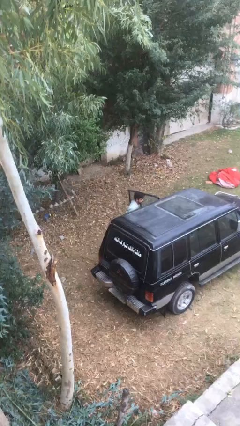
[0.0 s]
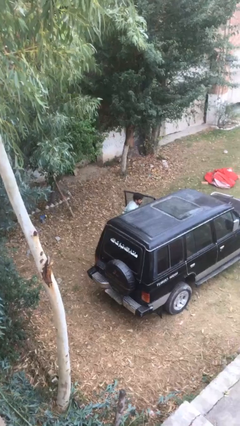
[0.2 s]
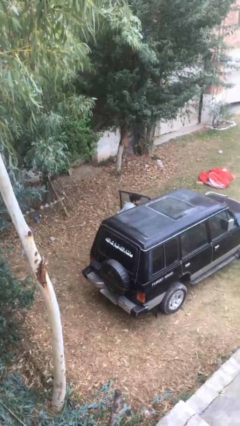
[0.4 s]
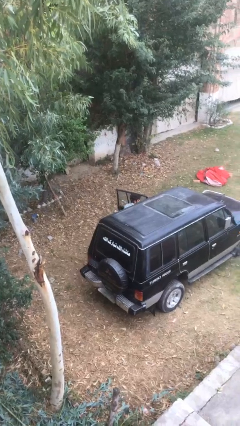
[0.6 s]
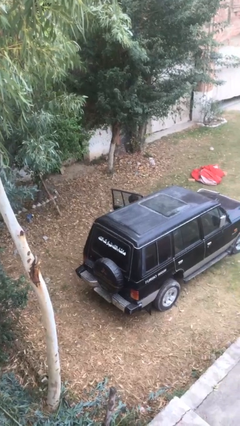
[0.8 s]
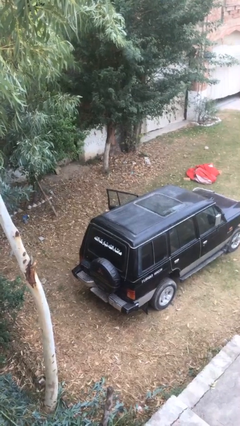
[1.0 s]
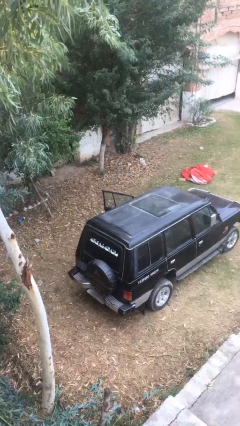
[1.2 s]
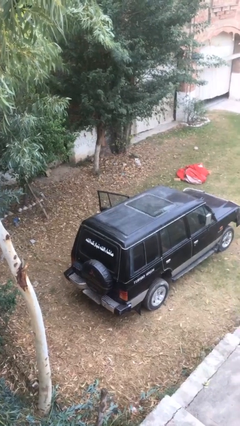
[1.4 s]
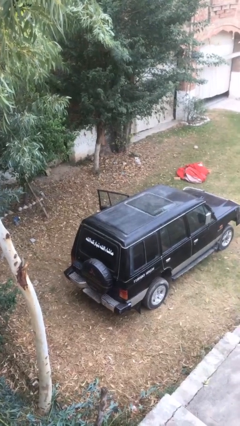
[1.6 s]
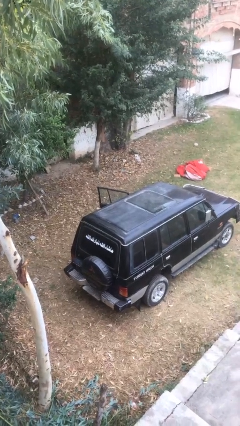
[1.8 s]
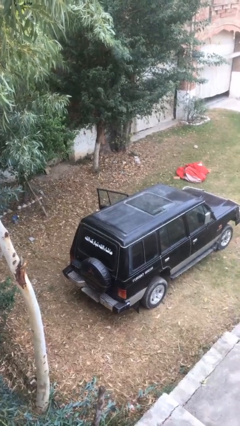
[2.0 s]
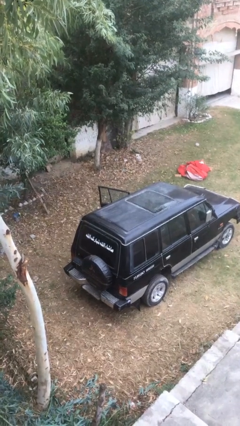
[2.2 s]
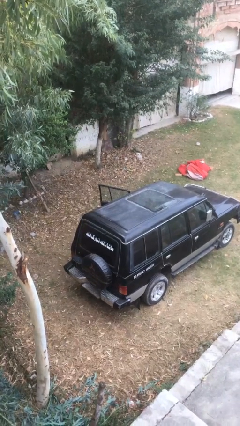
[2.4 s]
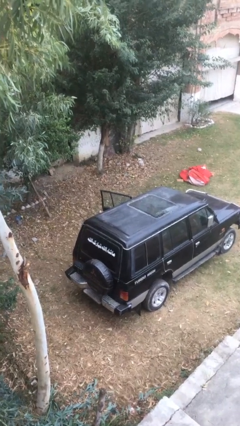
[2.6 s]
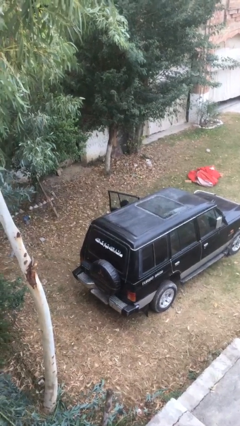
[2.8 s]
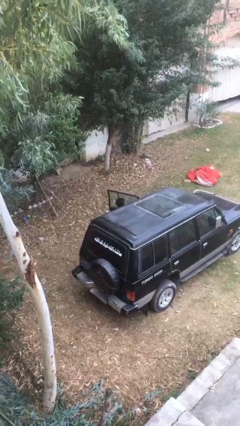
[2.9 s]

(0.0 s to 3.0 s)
person enters car

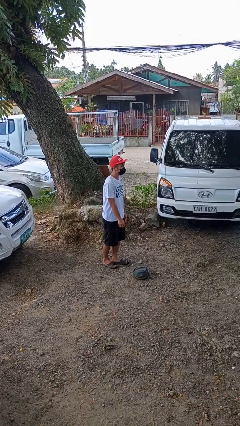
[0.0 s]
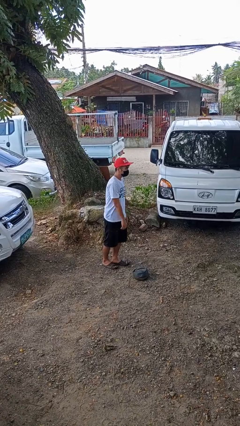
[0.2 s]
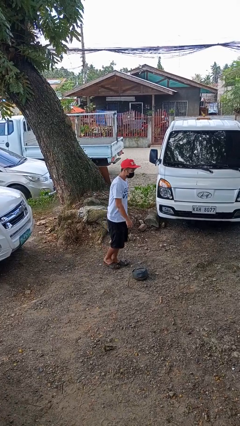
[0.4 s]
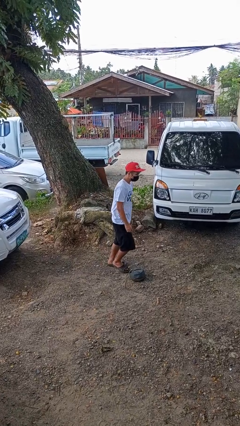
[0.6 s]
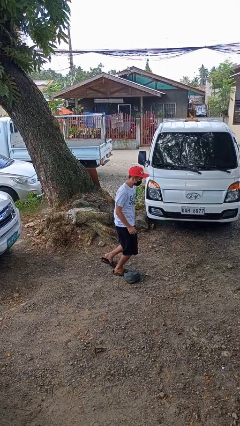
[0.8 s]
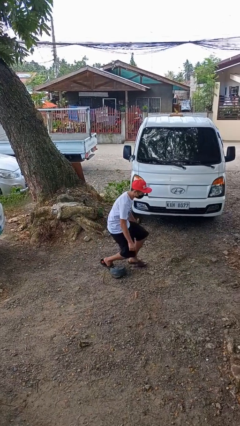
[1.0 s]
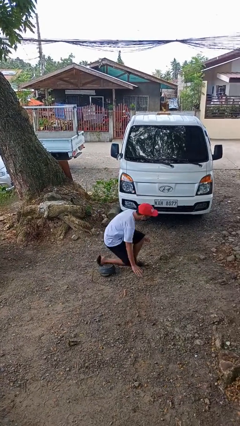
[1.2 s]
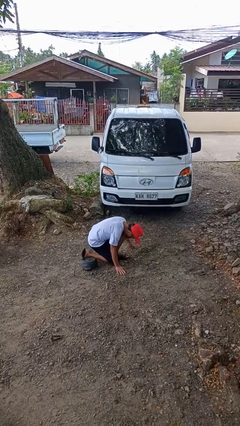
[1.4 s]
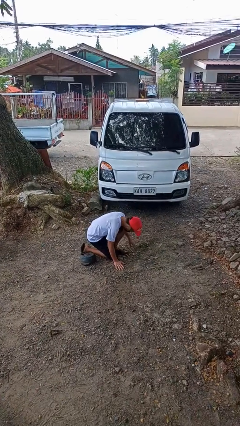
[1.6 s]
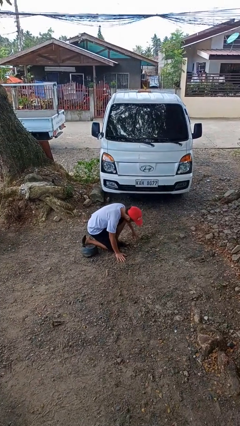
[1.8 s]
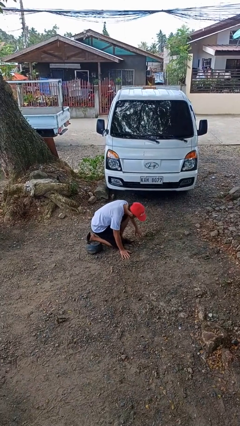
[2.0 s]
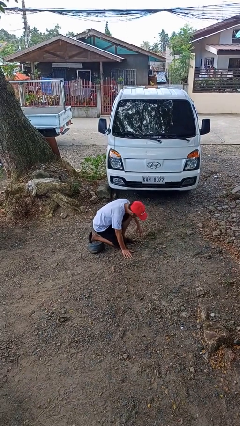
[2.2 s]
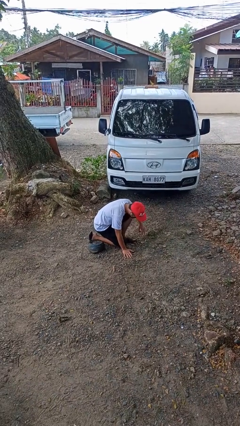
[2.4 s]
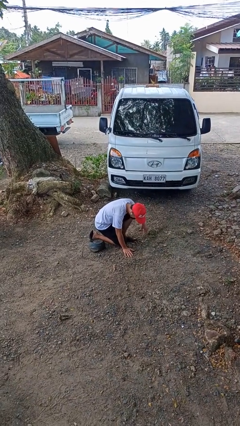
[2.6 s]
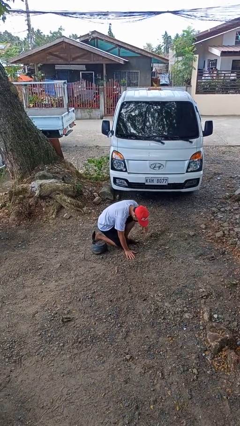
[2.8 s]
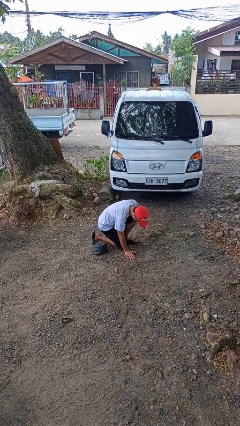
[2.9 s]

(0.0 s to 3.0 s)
person trips on object on floor

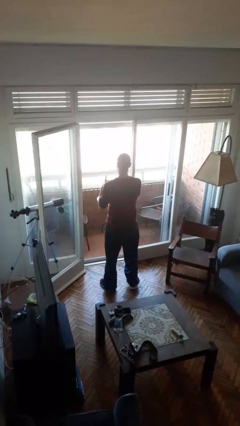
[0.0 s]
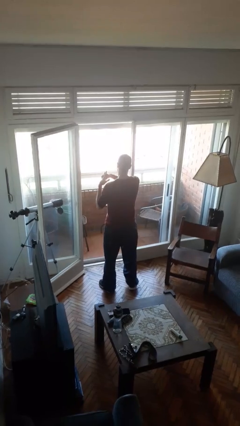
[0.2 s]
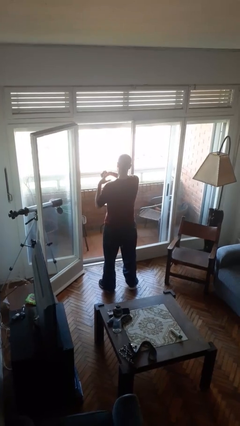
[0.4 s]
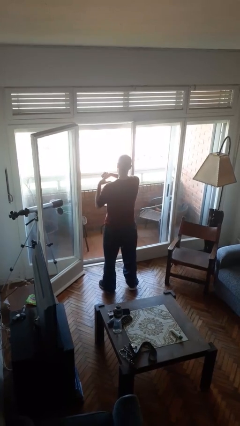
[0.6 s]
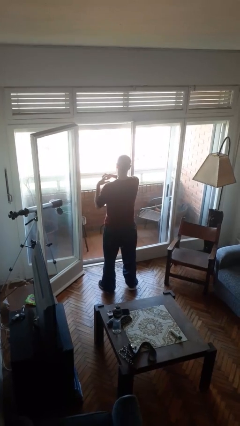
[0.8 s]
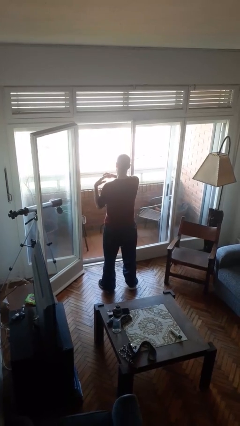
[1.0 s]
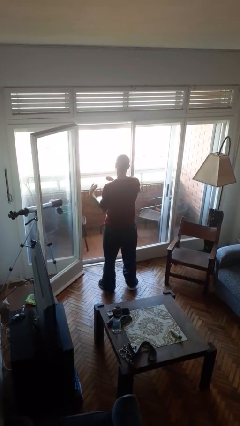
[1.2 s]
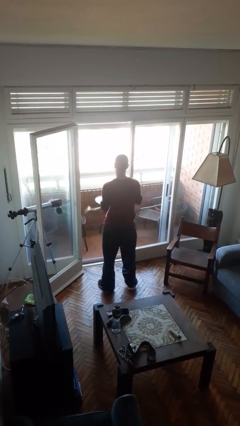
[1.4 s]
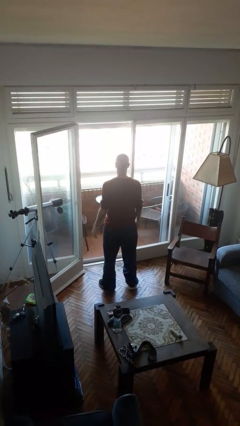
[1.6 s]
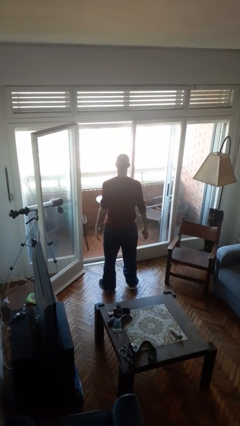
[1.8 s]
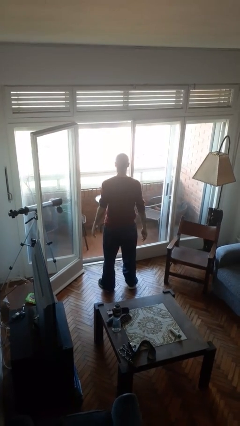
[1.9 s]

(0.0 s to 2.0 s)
person takes off ring

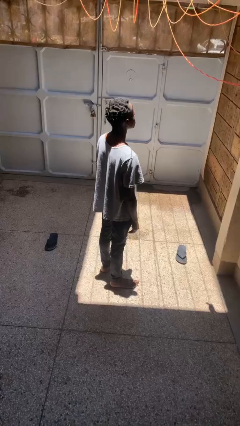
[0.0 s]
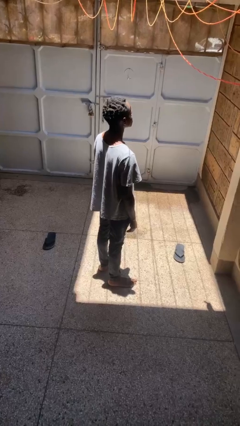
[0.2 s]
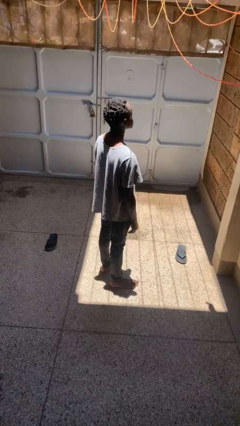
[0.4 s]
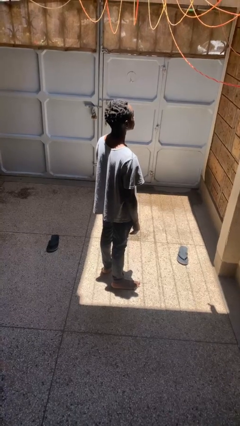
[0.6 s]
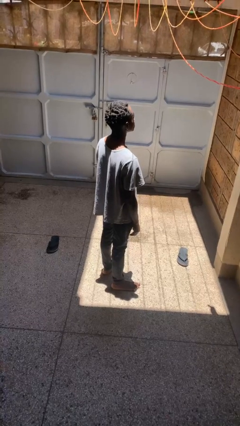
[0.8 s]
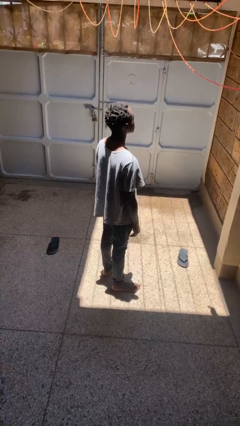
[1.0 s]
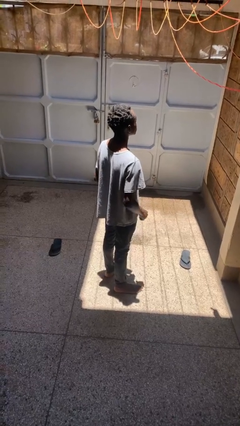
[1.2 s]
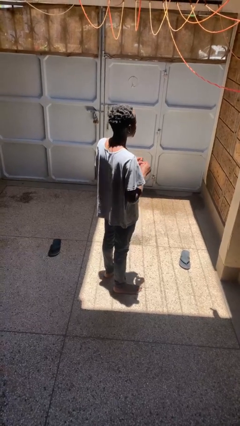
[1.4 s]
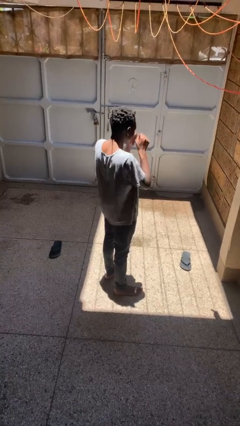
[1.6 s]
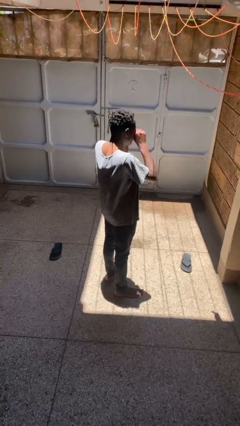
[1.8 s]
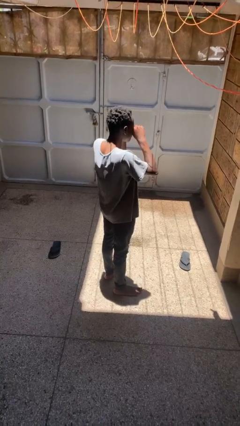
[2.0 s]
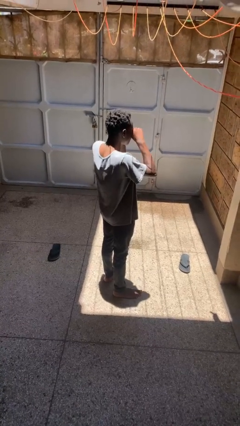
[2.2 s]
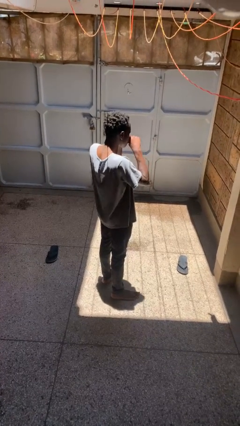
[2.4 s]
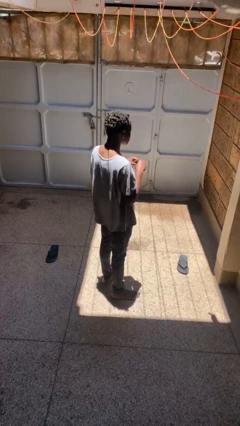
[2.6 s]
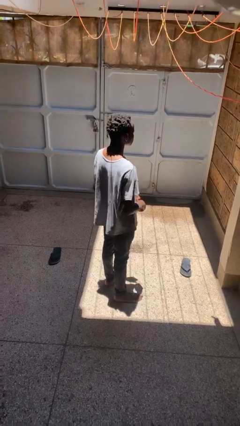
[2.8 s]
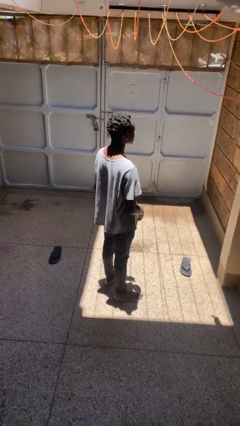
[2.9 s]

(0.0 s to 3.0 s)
person rubs eyes

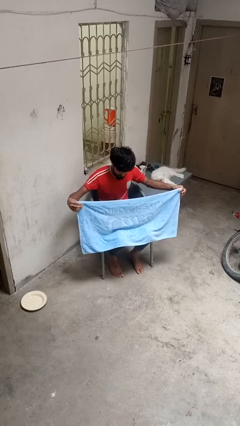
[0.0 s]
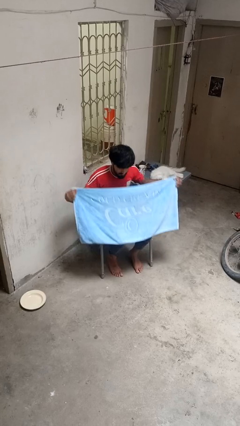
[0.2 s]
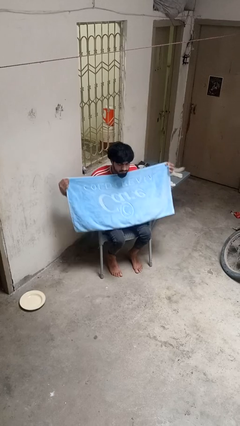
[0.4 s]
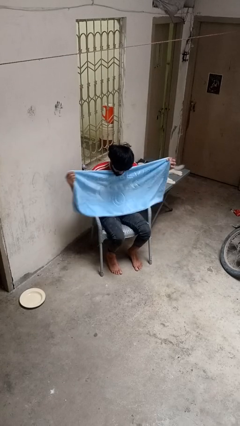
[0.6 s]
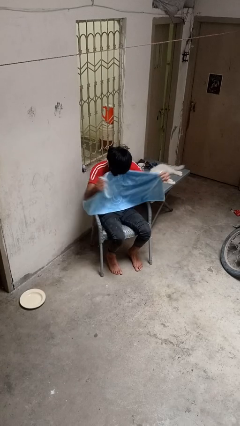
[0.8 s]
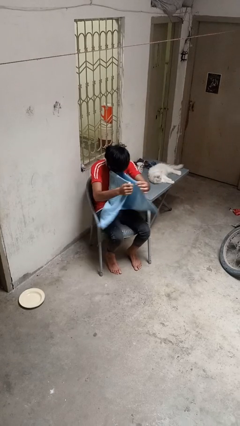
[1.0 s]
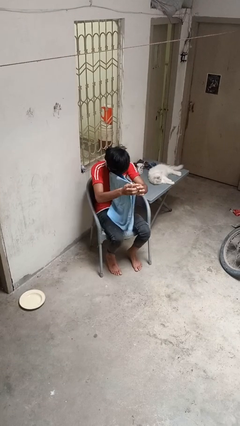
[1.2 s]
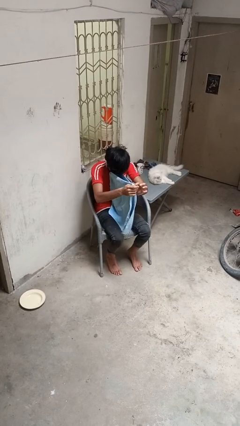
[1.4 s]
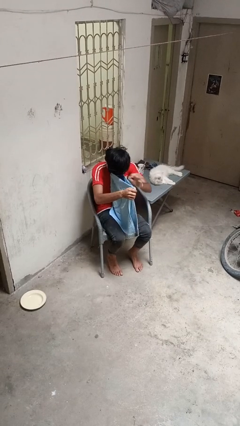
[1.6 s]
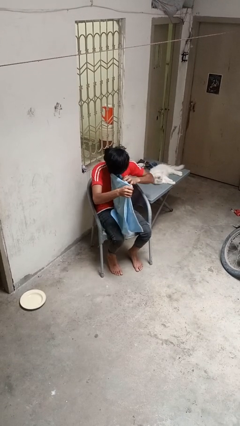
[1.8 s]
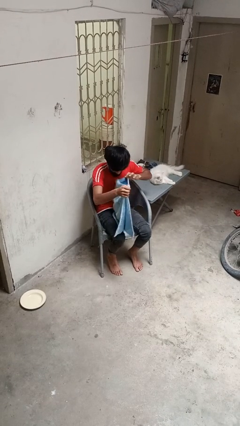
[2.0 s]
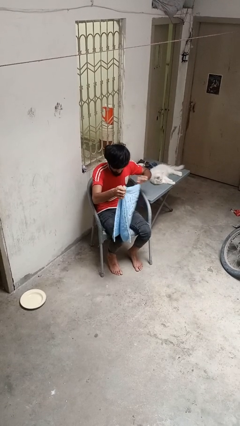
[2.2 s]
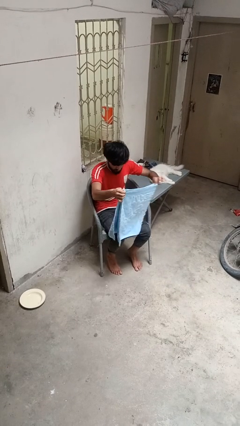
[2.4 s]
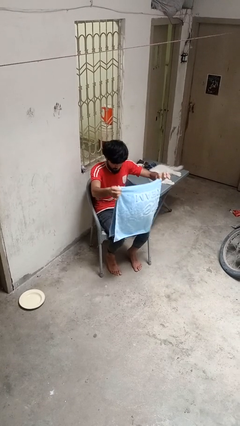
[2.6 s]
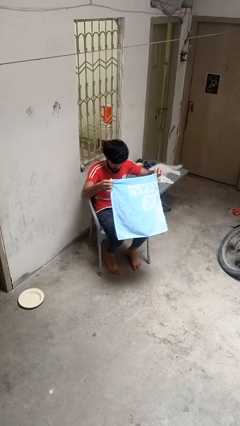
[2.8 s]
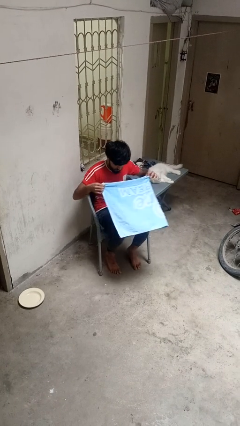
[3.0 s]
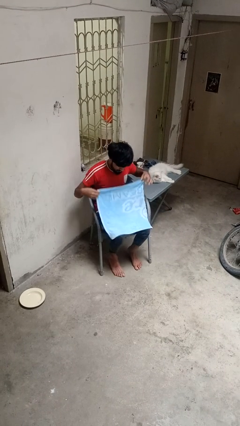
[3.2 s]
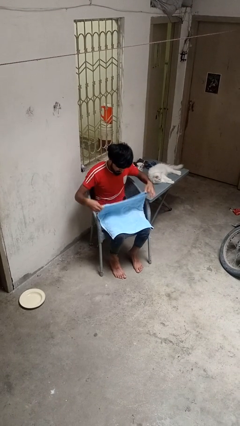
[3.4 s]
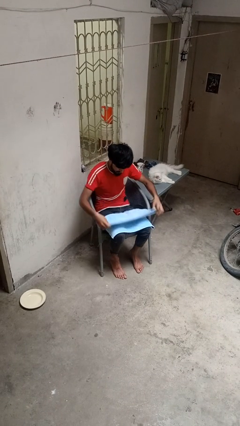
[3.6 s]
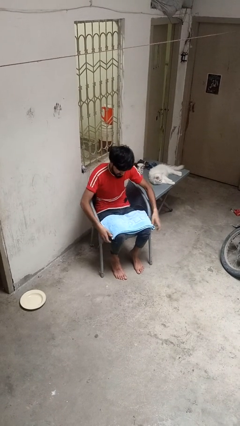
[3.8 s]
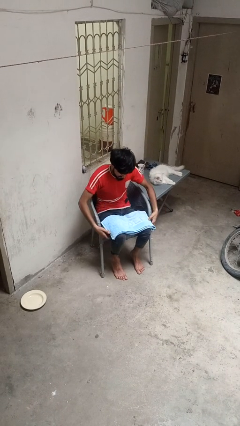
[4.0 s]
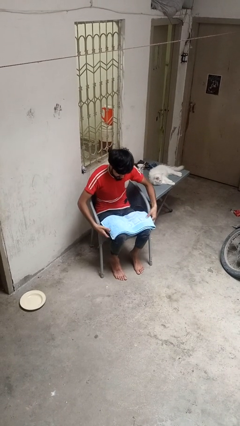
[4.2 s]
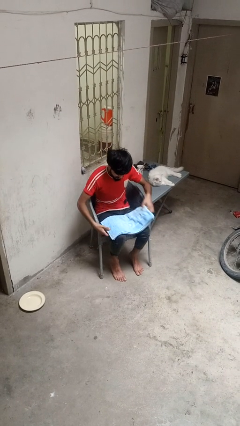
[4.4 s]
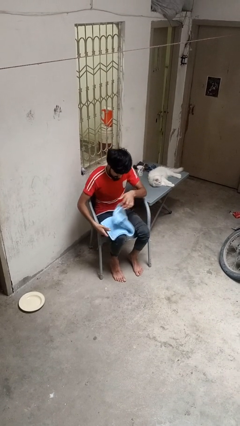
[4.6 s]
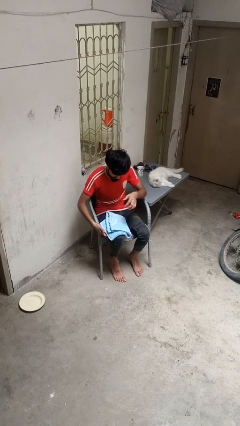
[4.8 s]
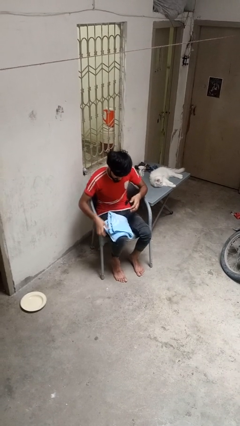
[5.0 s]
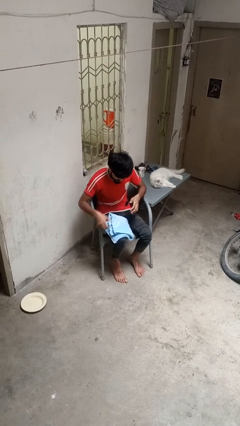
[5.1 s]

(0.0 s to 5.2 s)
person folds towel

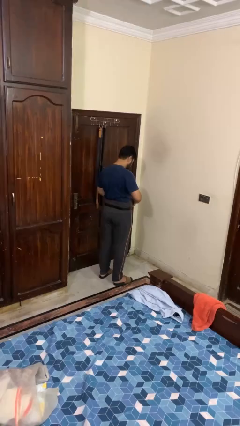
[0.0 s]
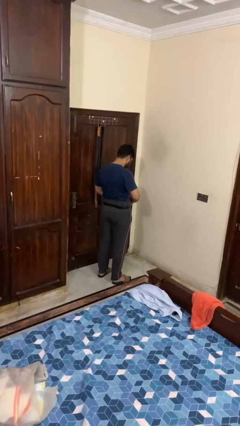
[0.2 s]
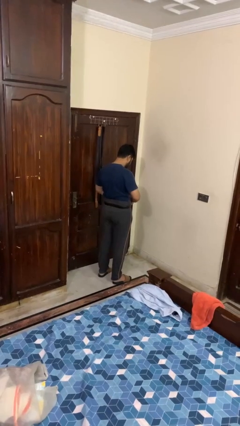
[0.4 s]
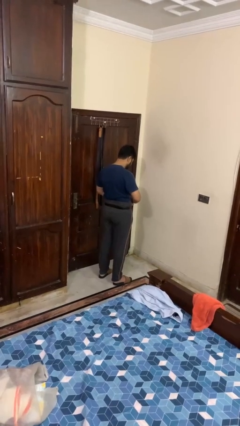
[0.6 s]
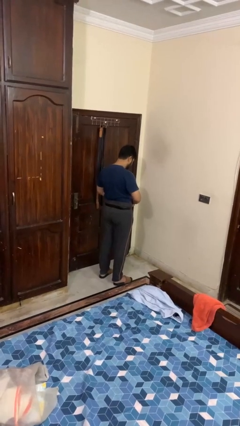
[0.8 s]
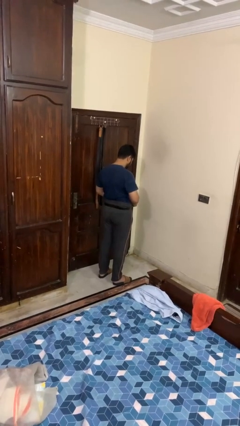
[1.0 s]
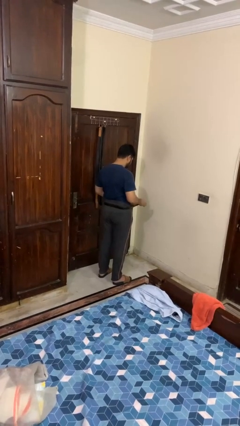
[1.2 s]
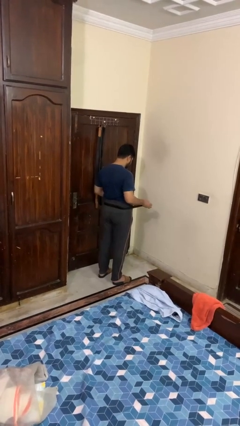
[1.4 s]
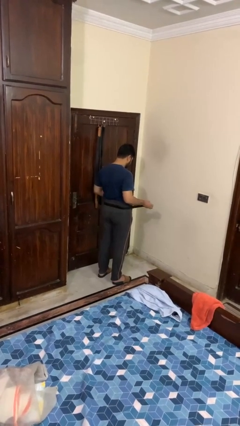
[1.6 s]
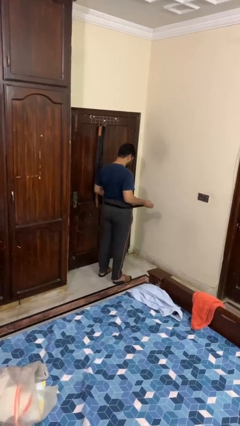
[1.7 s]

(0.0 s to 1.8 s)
person takes off belt
